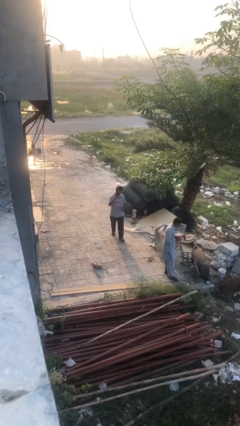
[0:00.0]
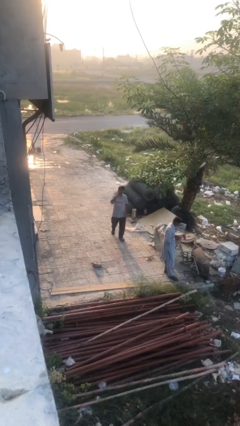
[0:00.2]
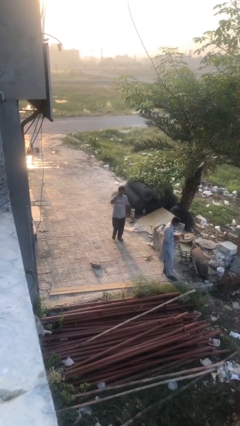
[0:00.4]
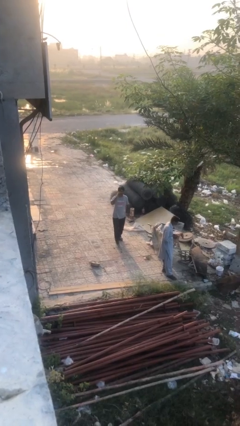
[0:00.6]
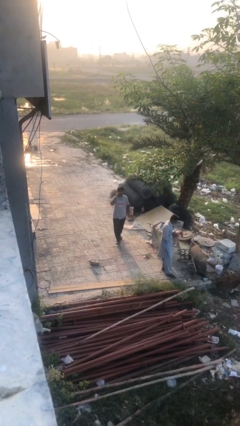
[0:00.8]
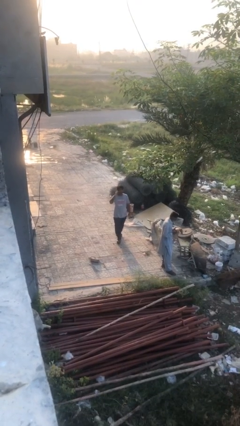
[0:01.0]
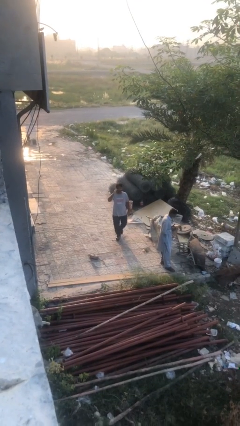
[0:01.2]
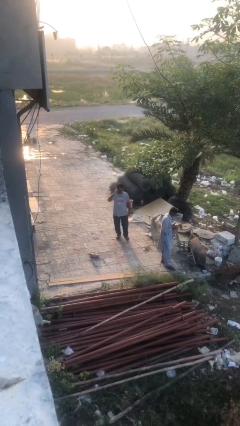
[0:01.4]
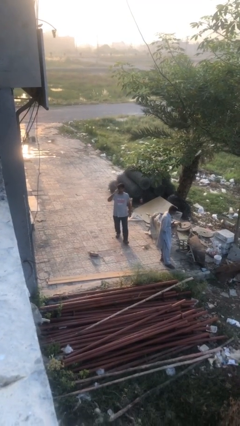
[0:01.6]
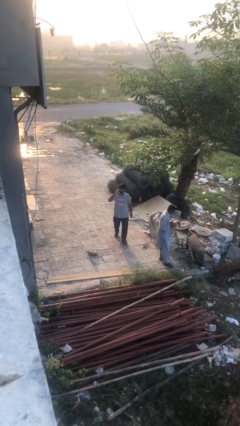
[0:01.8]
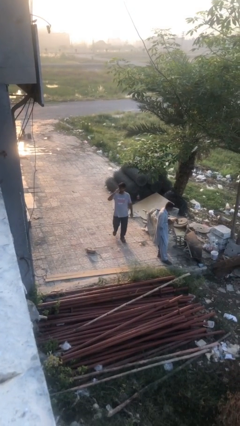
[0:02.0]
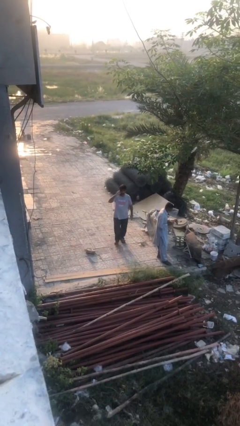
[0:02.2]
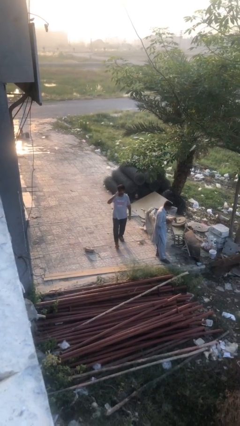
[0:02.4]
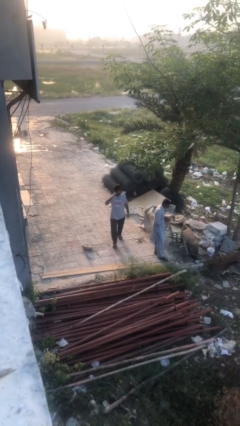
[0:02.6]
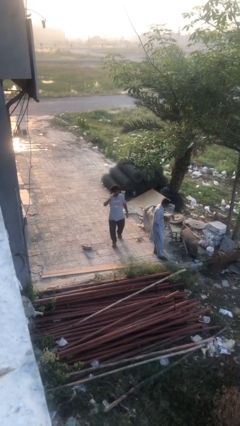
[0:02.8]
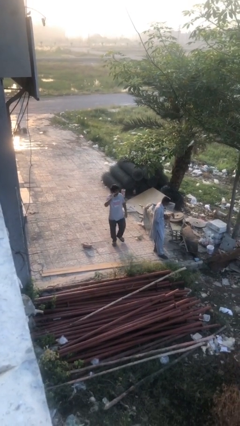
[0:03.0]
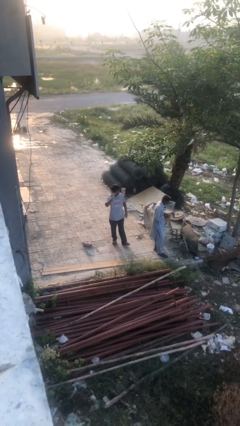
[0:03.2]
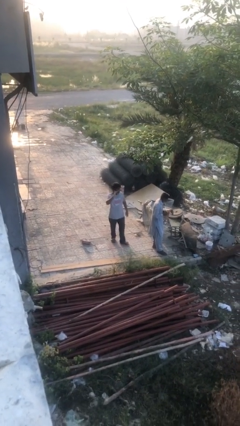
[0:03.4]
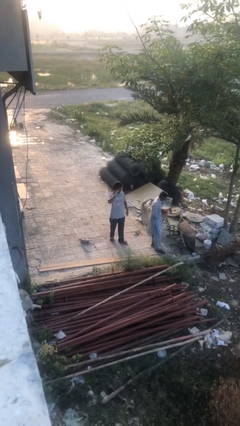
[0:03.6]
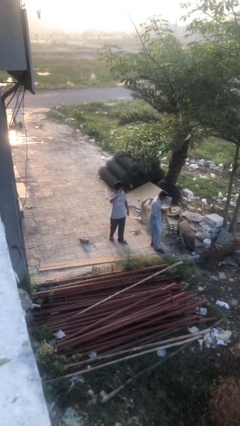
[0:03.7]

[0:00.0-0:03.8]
person talks on phone

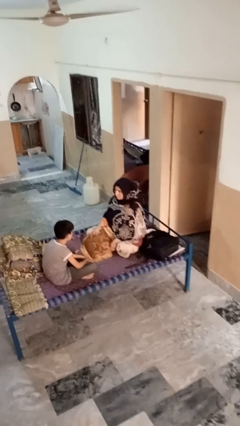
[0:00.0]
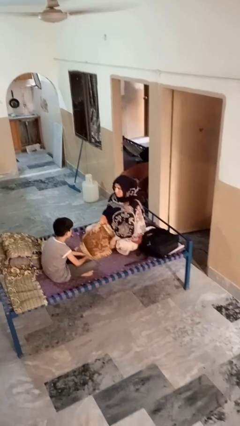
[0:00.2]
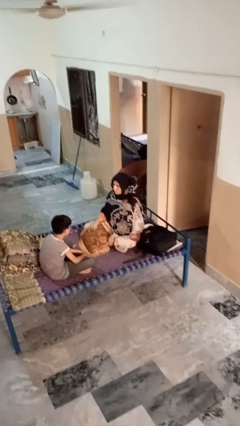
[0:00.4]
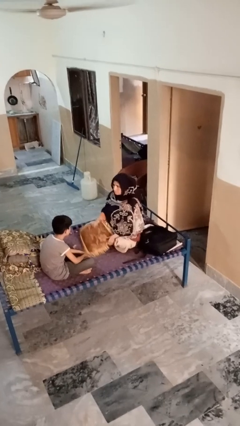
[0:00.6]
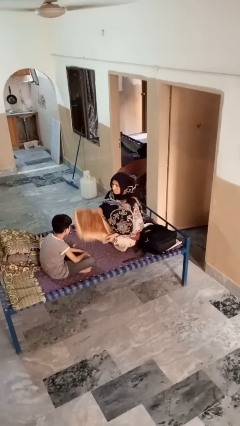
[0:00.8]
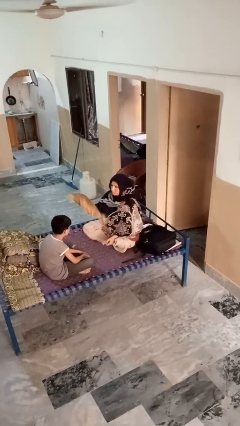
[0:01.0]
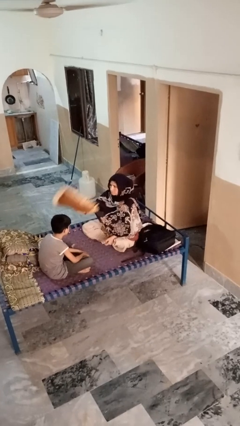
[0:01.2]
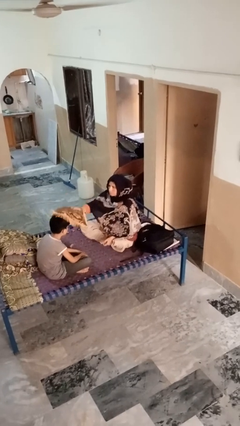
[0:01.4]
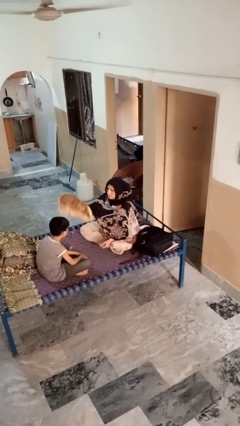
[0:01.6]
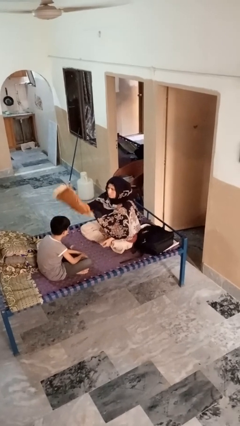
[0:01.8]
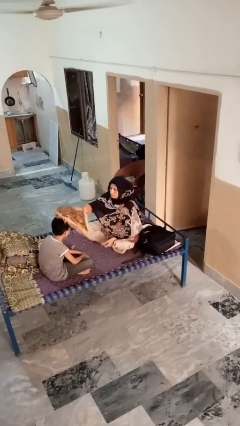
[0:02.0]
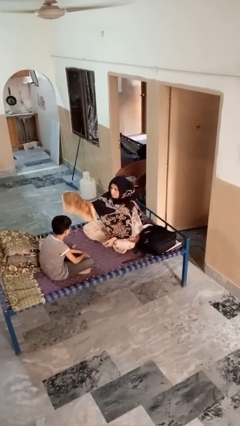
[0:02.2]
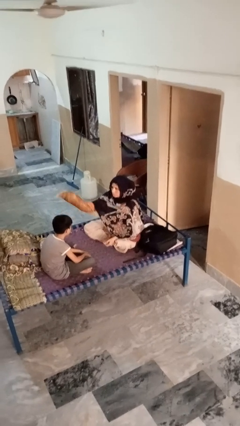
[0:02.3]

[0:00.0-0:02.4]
person hits person with pillow

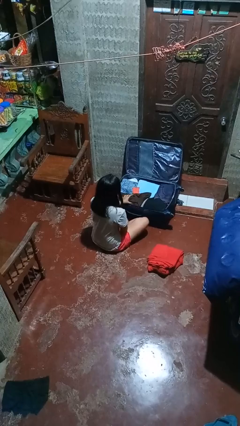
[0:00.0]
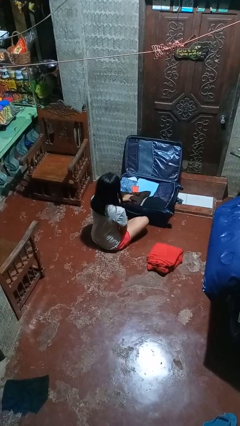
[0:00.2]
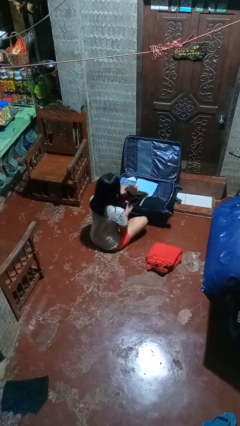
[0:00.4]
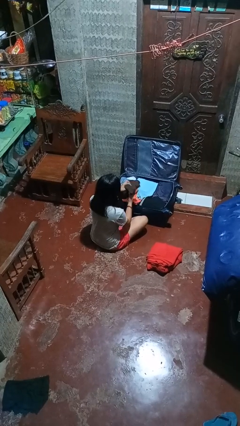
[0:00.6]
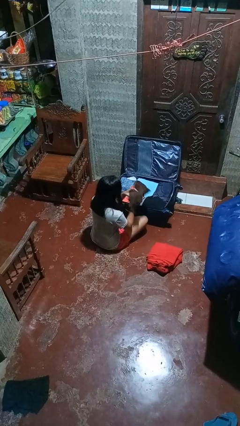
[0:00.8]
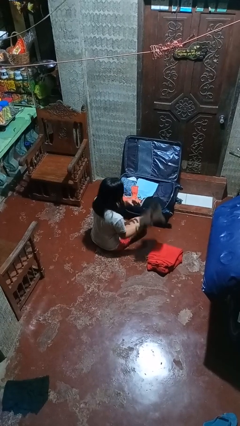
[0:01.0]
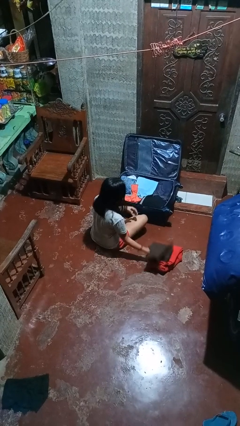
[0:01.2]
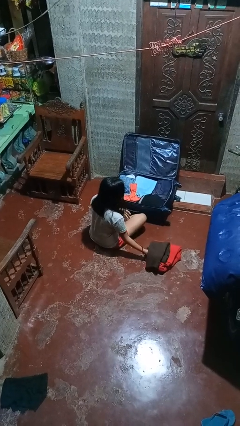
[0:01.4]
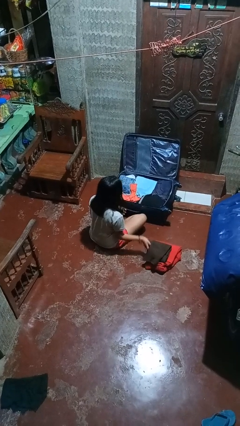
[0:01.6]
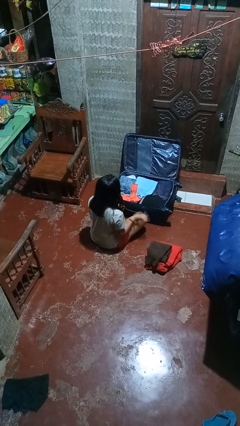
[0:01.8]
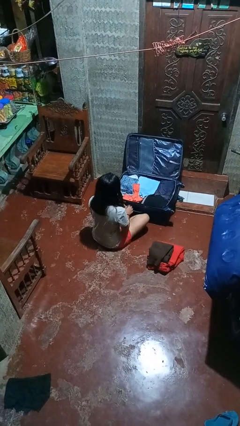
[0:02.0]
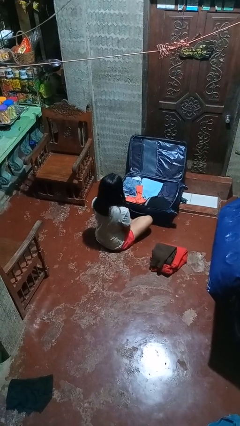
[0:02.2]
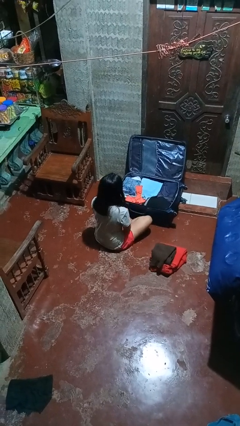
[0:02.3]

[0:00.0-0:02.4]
person unloads clothes from suitcase

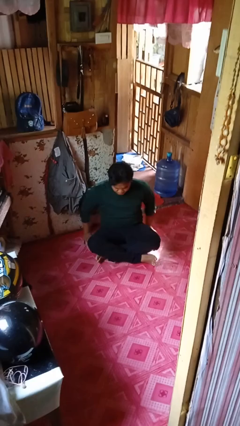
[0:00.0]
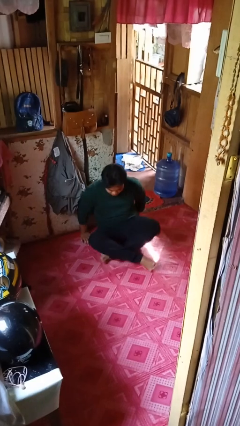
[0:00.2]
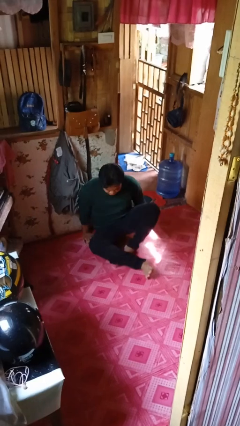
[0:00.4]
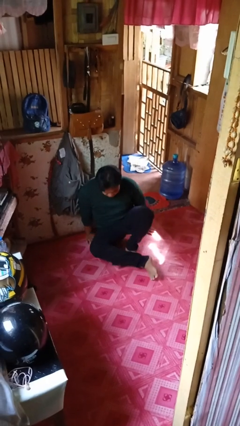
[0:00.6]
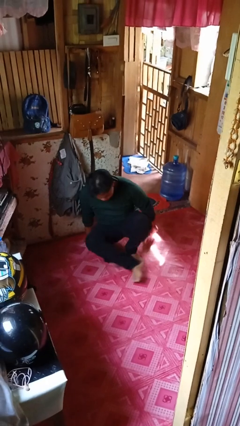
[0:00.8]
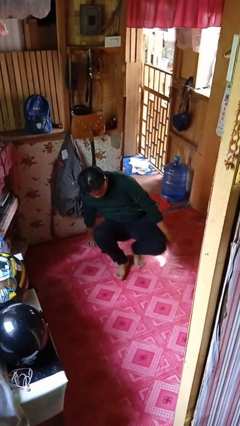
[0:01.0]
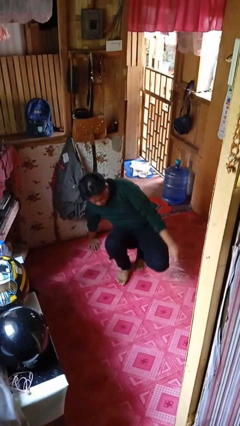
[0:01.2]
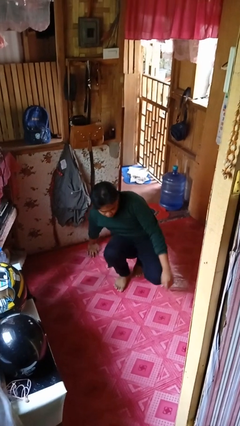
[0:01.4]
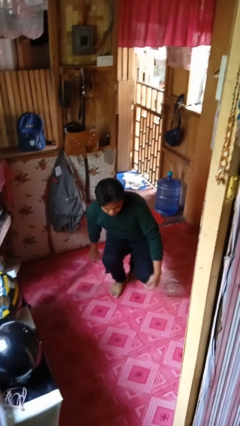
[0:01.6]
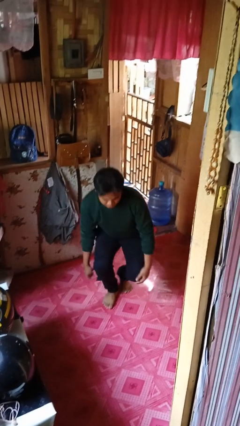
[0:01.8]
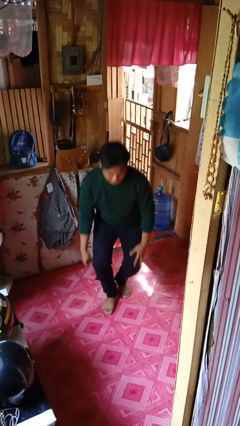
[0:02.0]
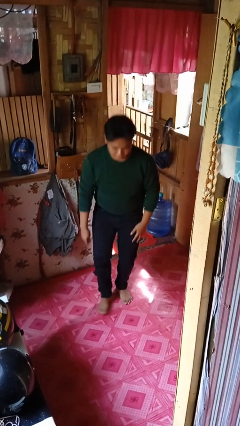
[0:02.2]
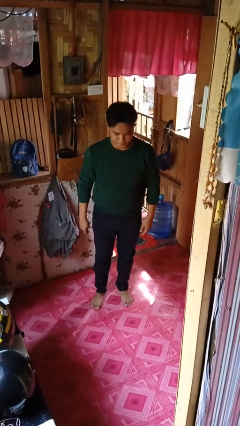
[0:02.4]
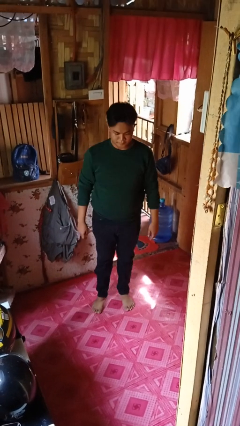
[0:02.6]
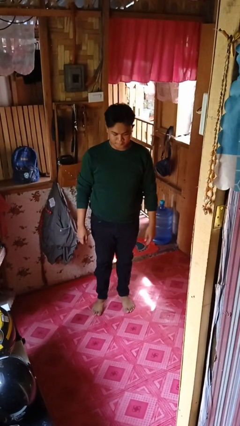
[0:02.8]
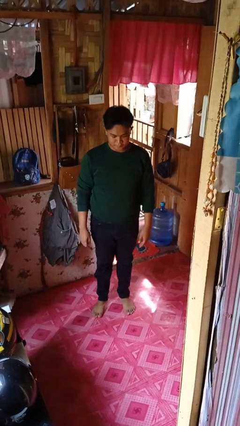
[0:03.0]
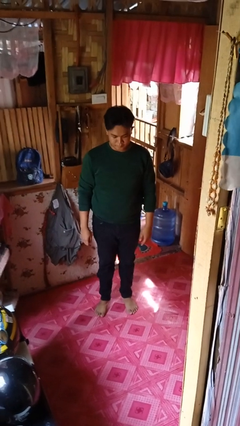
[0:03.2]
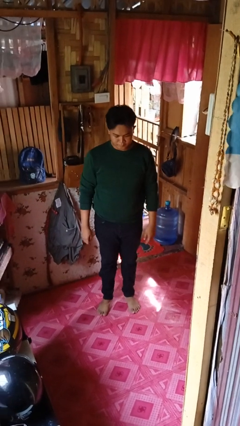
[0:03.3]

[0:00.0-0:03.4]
person stands up from floor

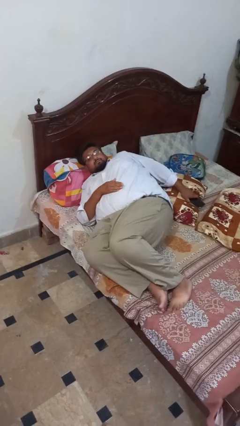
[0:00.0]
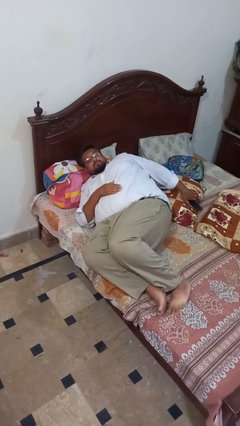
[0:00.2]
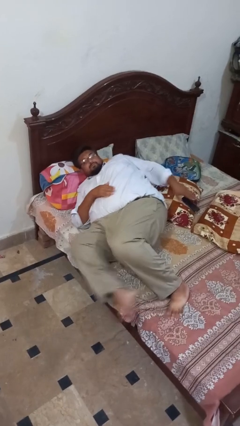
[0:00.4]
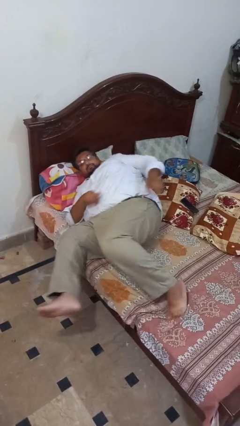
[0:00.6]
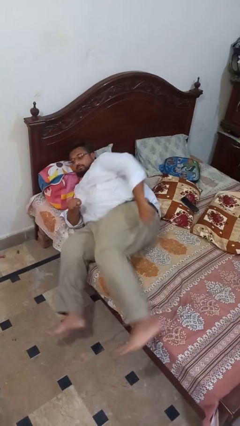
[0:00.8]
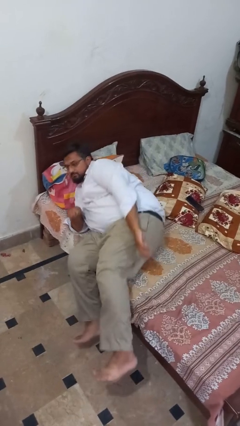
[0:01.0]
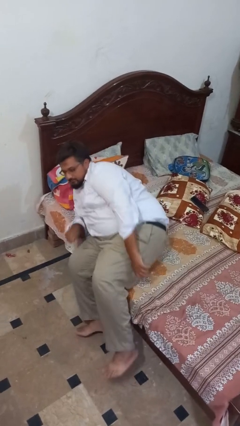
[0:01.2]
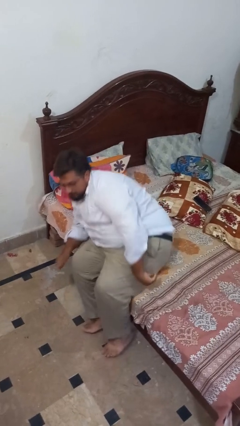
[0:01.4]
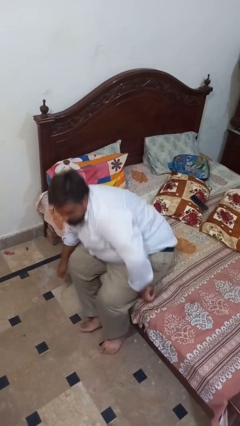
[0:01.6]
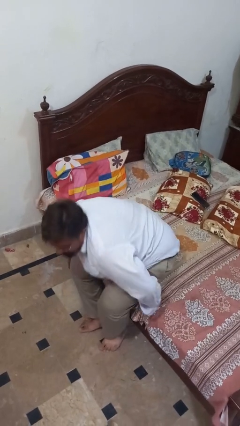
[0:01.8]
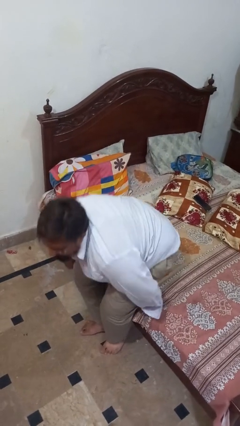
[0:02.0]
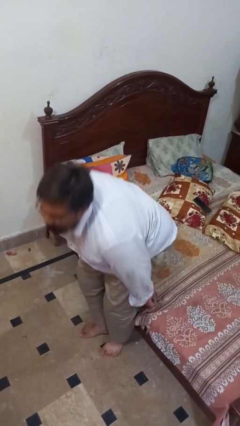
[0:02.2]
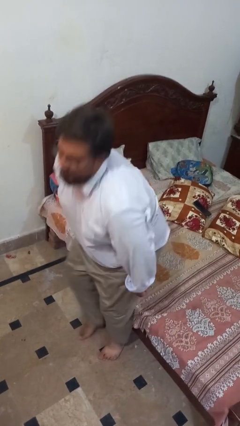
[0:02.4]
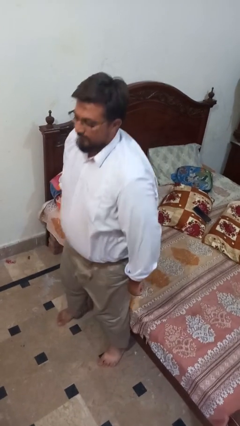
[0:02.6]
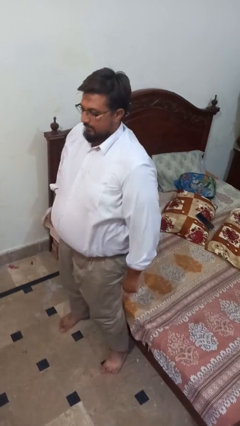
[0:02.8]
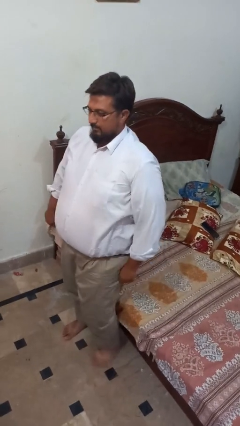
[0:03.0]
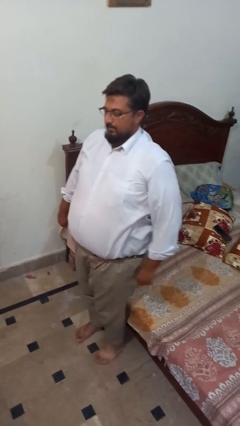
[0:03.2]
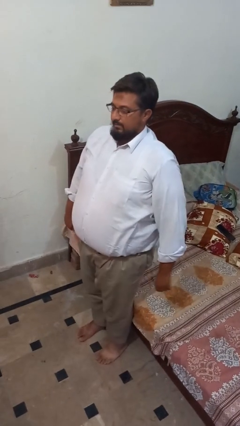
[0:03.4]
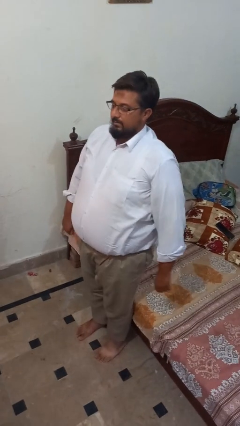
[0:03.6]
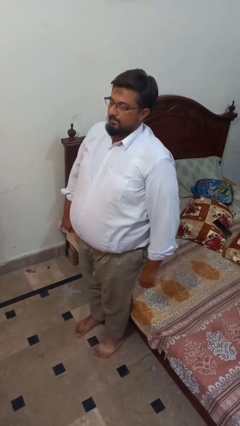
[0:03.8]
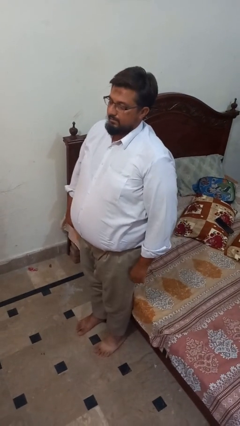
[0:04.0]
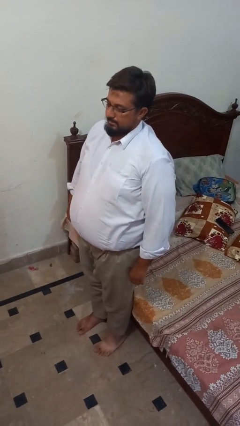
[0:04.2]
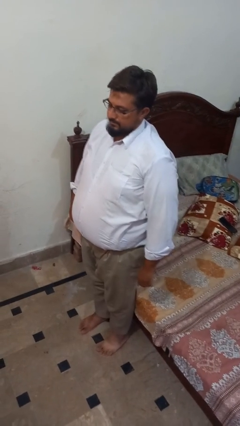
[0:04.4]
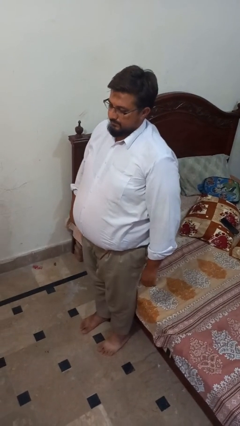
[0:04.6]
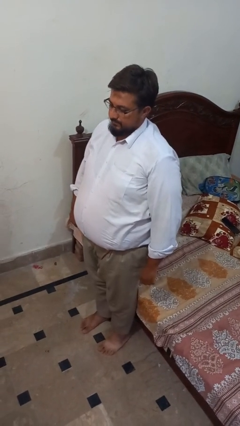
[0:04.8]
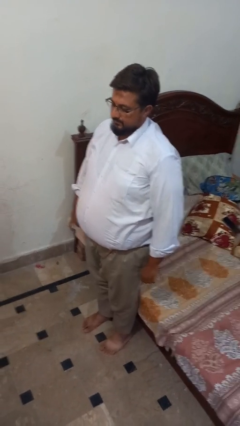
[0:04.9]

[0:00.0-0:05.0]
person stands up

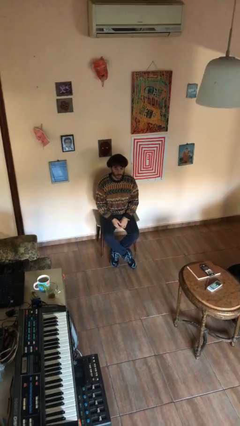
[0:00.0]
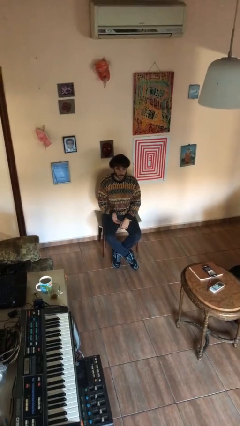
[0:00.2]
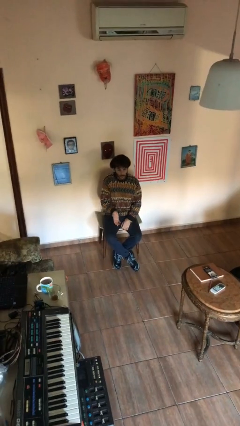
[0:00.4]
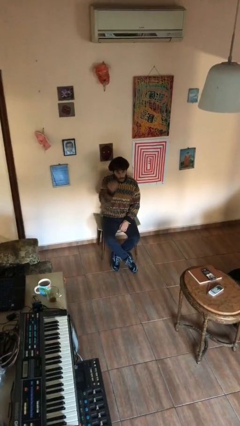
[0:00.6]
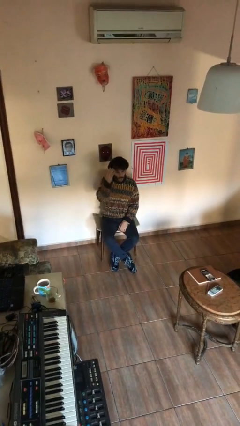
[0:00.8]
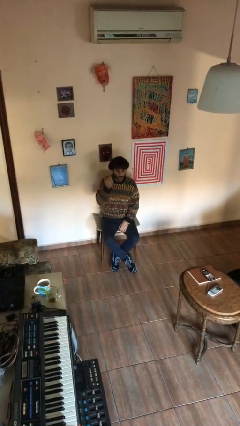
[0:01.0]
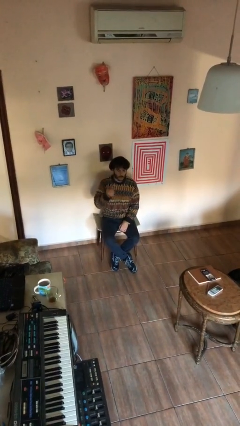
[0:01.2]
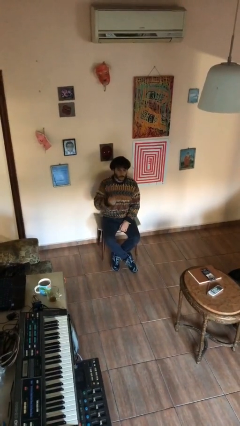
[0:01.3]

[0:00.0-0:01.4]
person gestures swipe up
